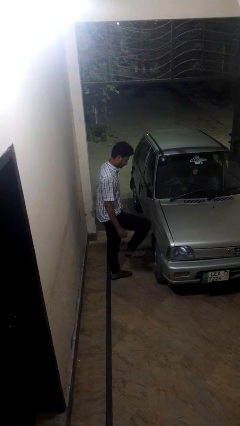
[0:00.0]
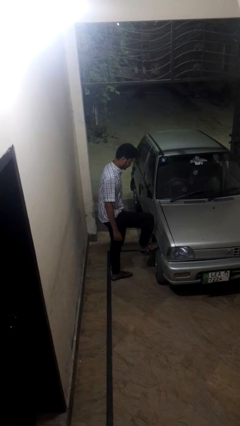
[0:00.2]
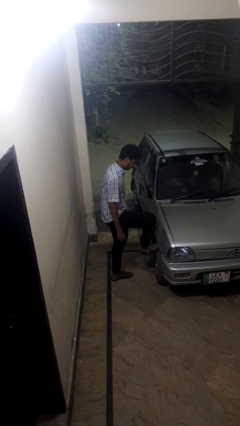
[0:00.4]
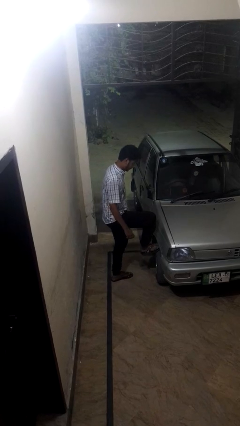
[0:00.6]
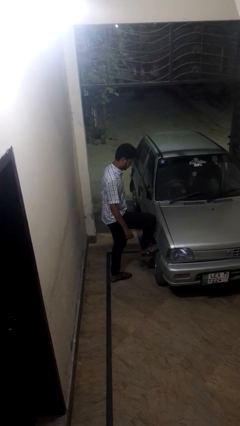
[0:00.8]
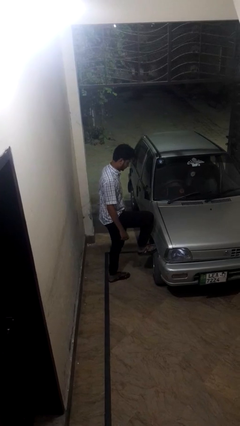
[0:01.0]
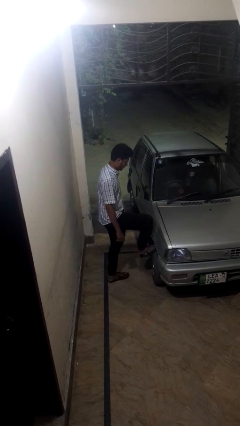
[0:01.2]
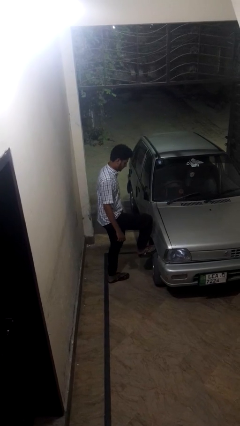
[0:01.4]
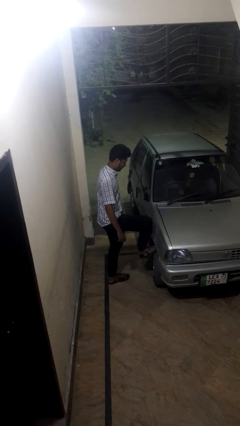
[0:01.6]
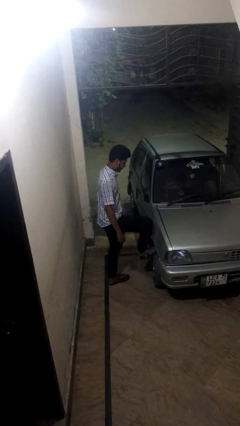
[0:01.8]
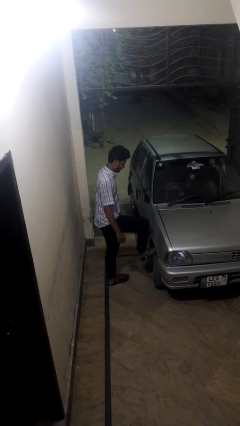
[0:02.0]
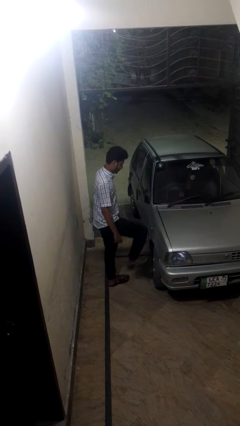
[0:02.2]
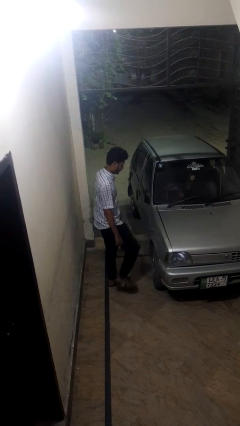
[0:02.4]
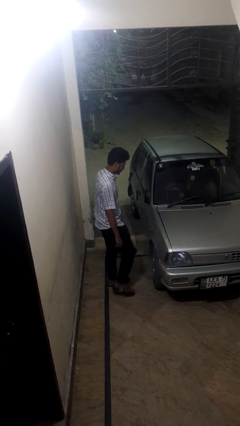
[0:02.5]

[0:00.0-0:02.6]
person kicks car tires

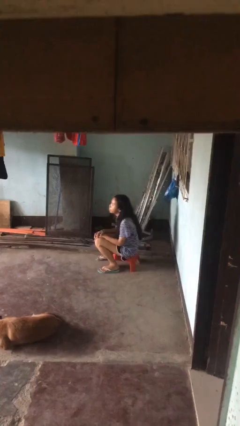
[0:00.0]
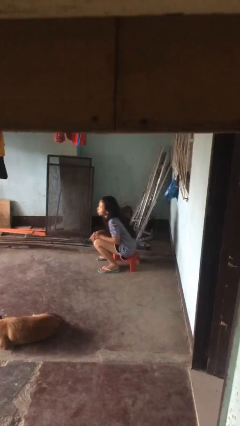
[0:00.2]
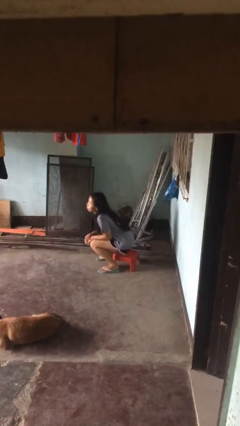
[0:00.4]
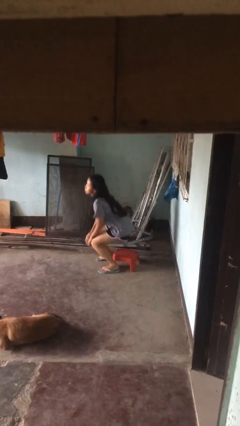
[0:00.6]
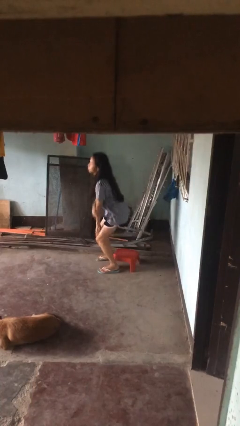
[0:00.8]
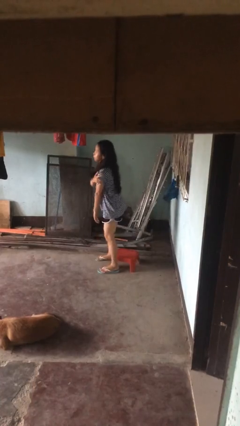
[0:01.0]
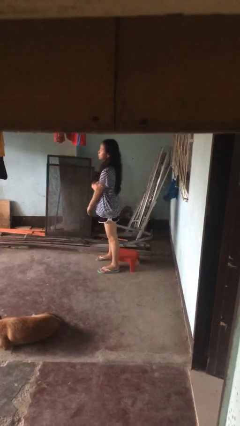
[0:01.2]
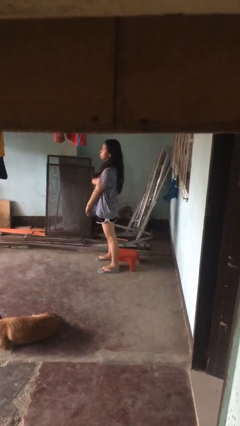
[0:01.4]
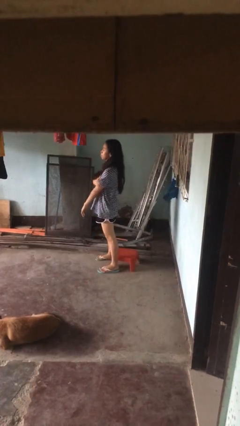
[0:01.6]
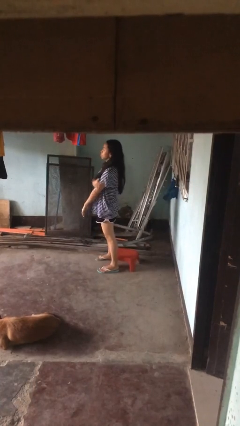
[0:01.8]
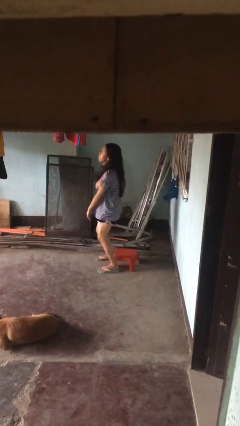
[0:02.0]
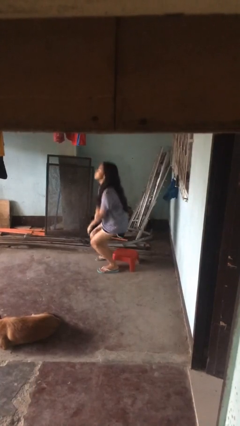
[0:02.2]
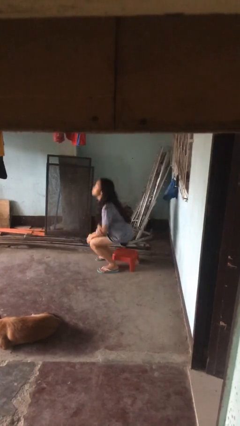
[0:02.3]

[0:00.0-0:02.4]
person stands up

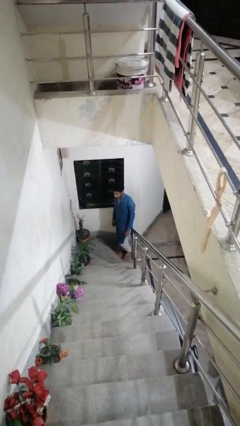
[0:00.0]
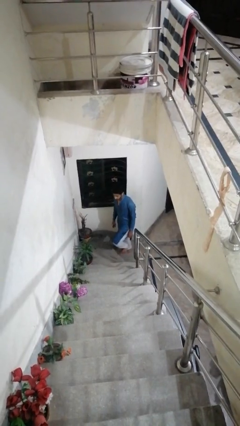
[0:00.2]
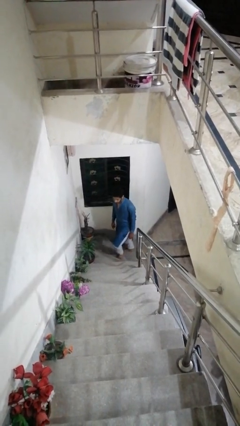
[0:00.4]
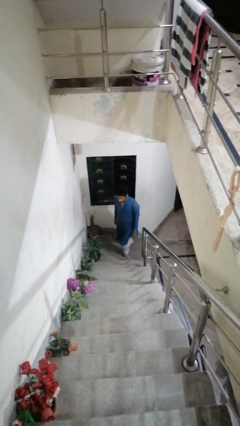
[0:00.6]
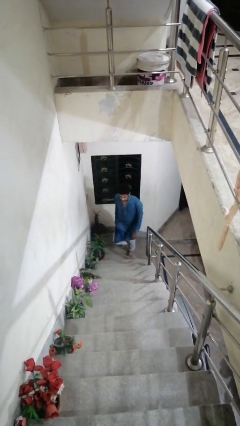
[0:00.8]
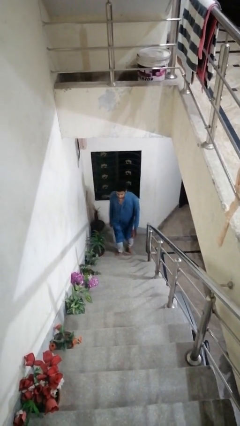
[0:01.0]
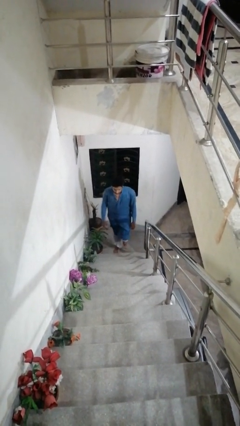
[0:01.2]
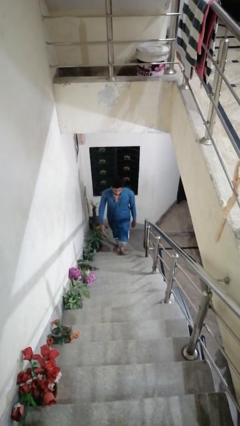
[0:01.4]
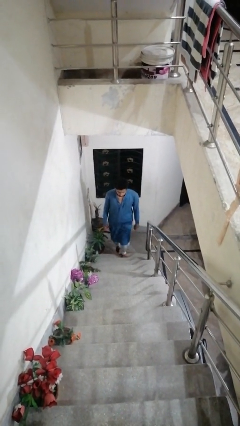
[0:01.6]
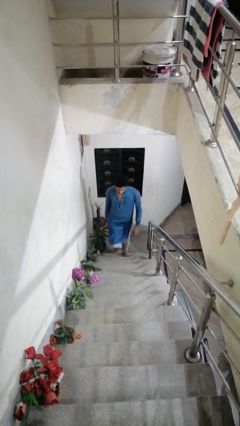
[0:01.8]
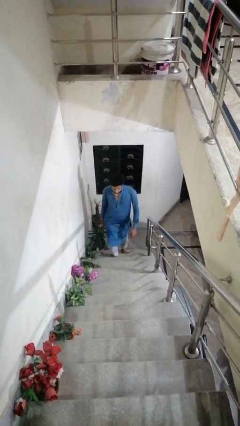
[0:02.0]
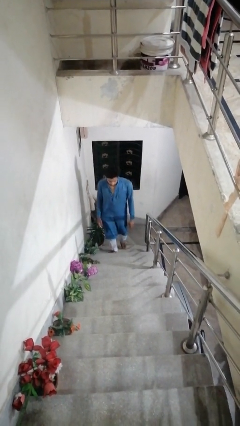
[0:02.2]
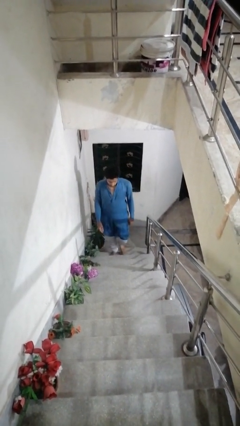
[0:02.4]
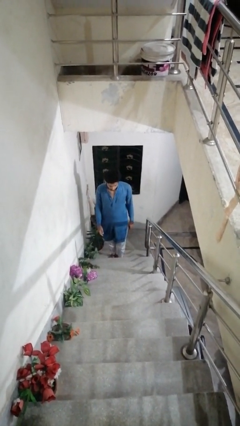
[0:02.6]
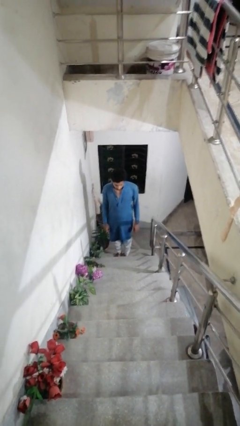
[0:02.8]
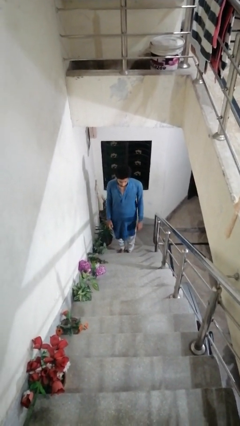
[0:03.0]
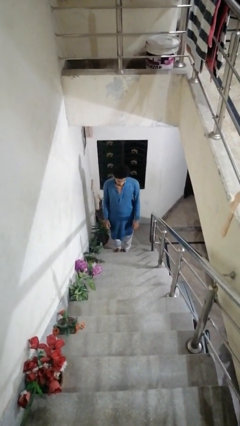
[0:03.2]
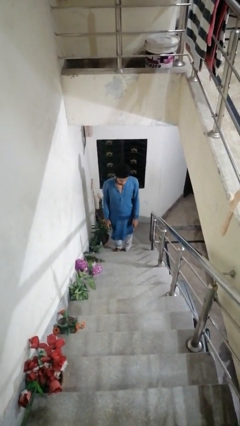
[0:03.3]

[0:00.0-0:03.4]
person climbs up stairs

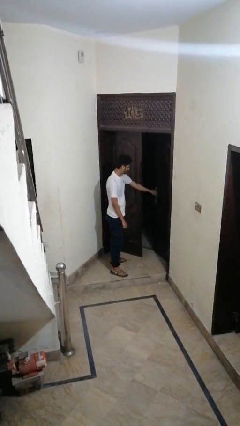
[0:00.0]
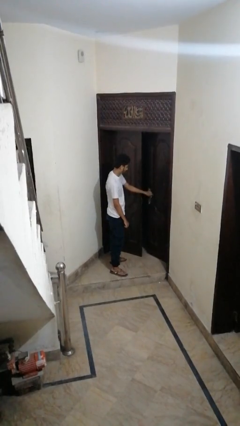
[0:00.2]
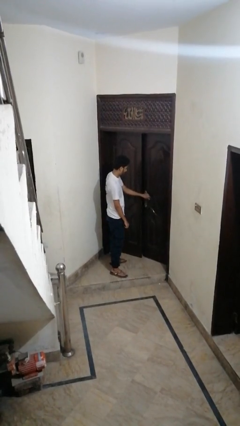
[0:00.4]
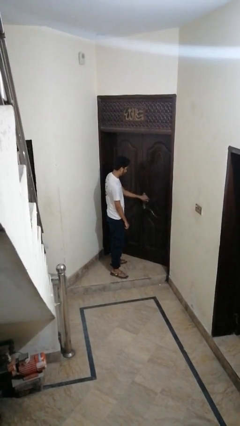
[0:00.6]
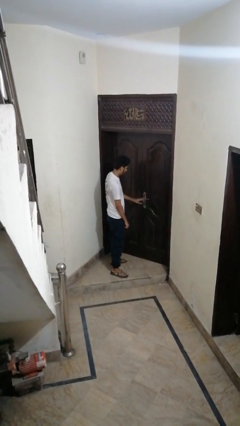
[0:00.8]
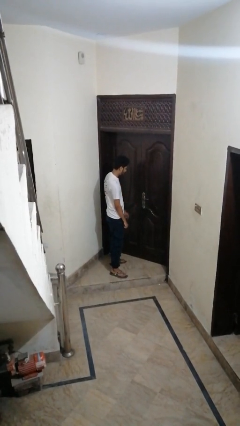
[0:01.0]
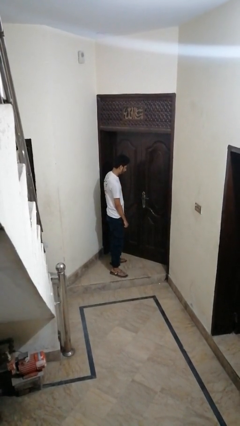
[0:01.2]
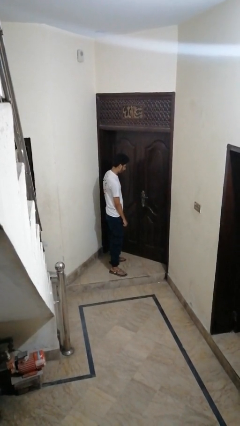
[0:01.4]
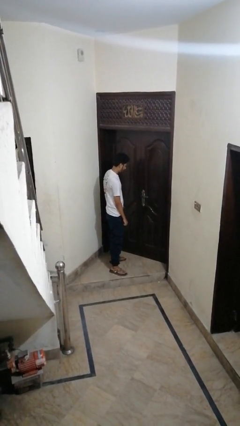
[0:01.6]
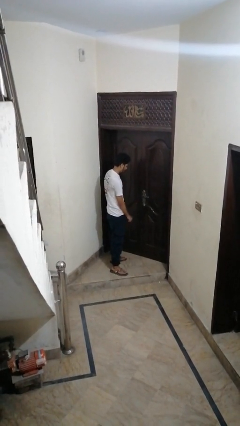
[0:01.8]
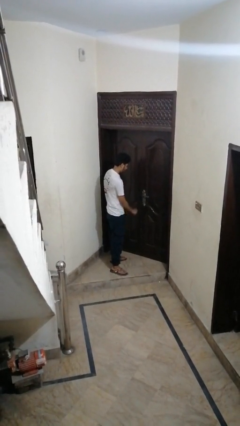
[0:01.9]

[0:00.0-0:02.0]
person closes facility door

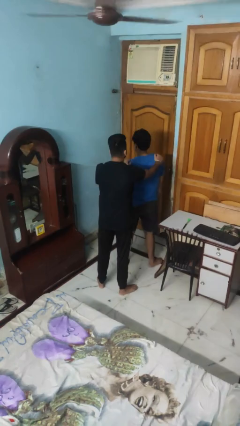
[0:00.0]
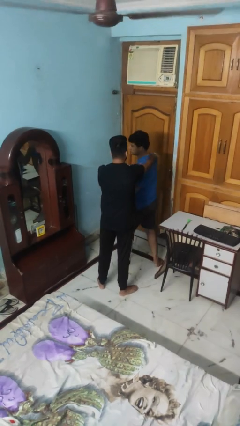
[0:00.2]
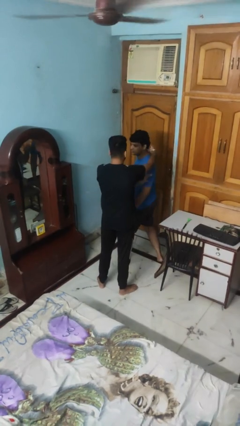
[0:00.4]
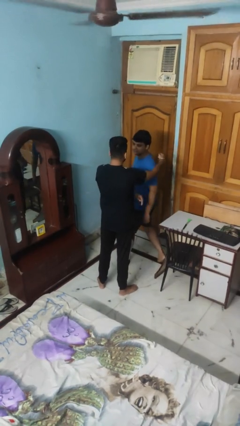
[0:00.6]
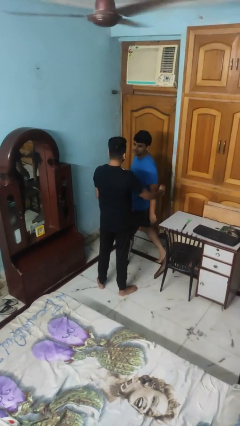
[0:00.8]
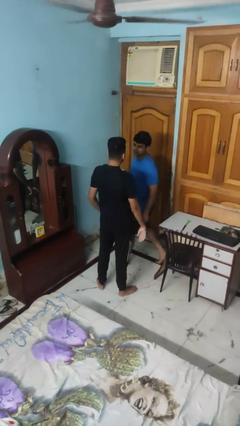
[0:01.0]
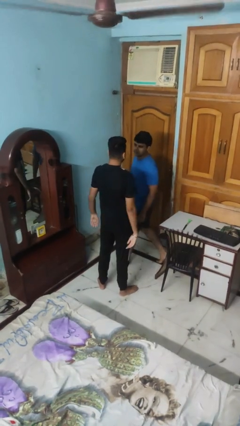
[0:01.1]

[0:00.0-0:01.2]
person spins person around

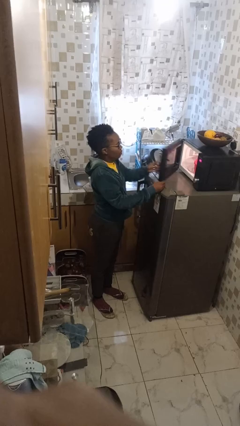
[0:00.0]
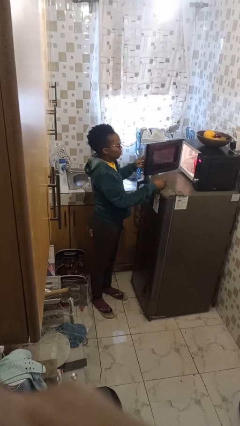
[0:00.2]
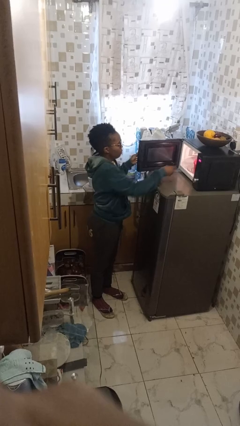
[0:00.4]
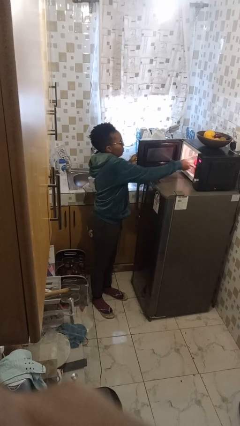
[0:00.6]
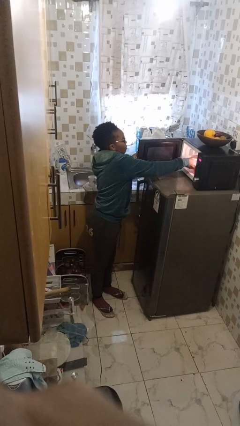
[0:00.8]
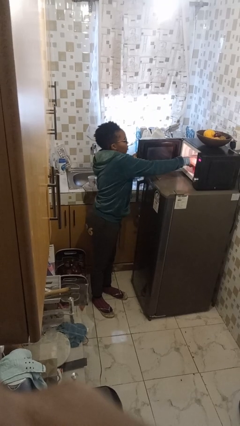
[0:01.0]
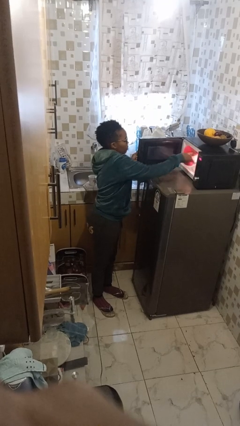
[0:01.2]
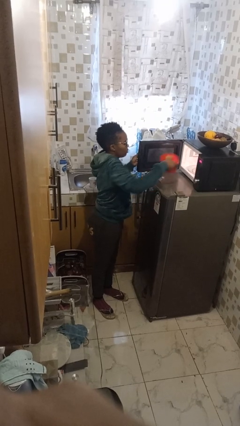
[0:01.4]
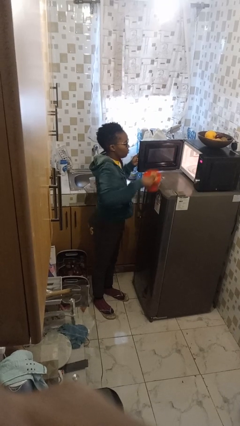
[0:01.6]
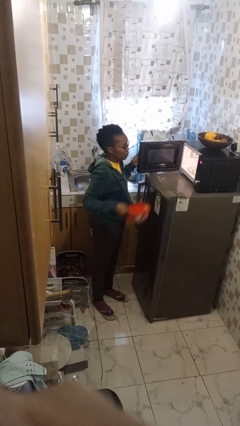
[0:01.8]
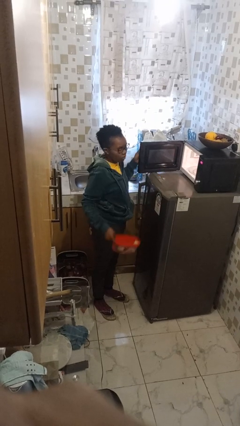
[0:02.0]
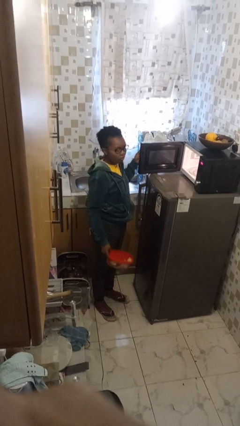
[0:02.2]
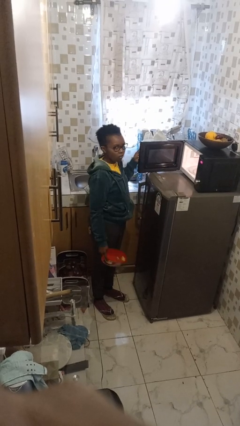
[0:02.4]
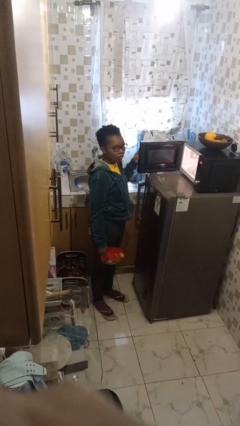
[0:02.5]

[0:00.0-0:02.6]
person takes object from microwave

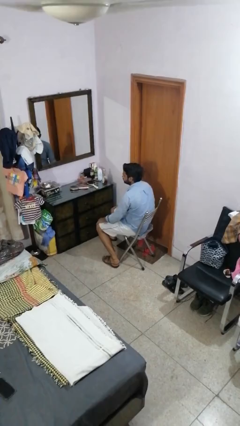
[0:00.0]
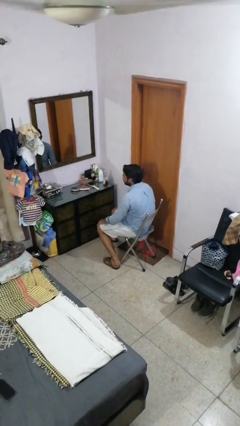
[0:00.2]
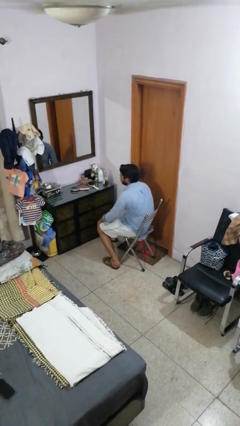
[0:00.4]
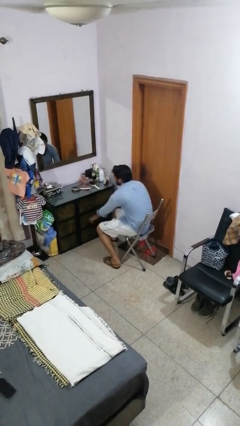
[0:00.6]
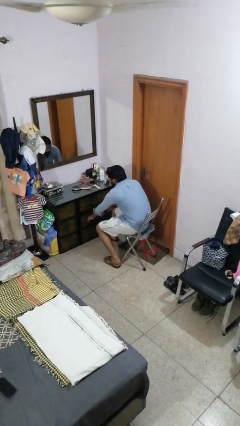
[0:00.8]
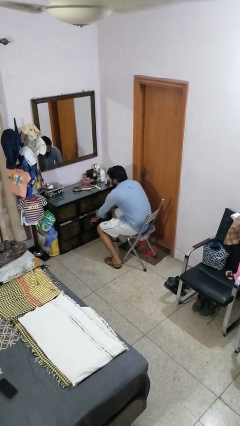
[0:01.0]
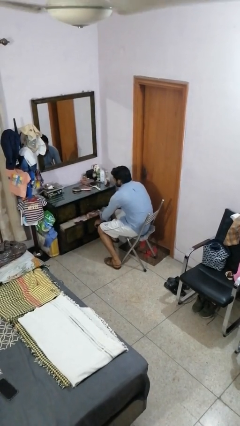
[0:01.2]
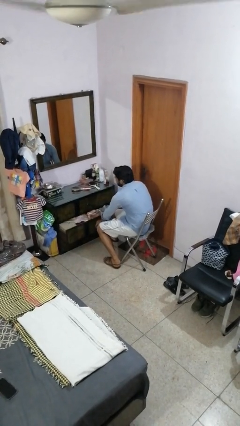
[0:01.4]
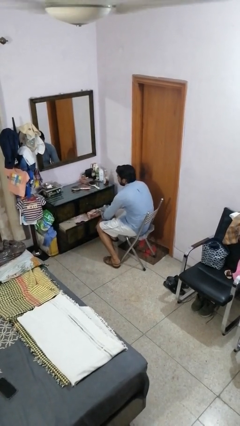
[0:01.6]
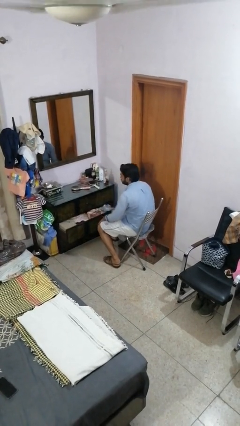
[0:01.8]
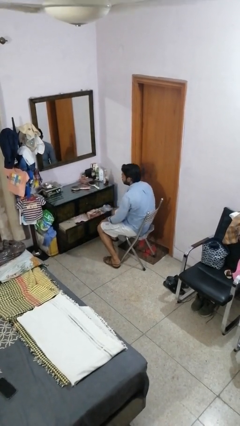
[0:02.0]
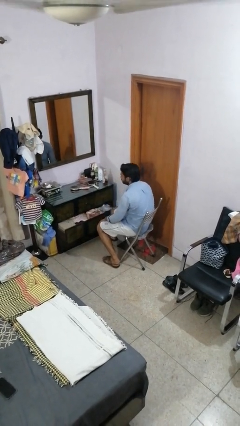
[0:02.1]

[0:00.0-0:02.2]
person opens dresser drawer

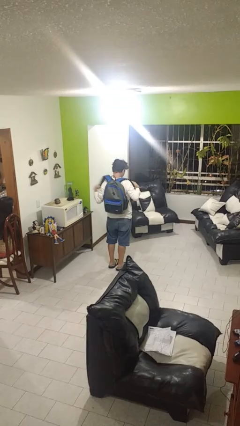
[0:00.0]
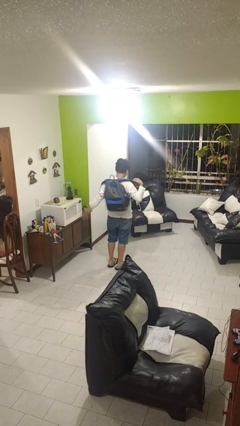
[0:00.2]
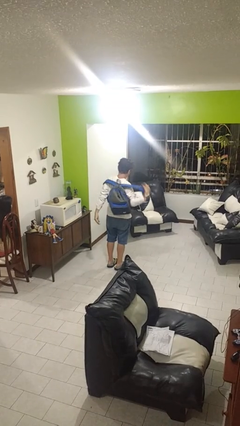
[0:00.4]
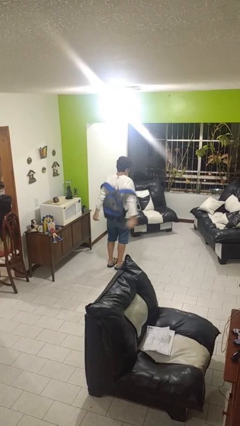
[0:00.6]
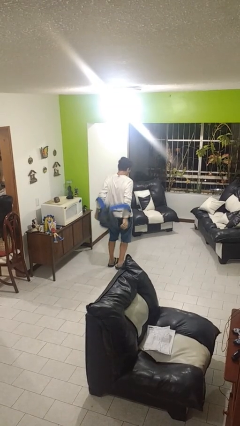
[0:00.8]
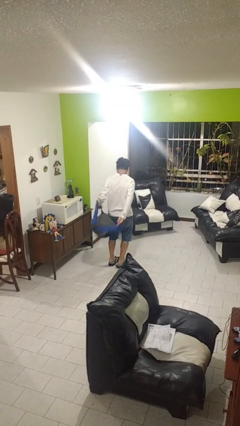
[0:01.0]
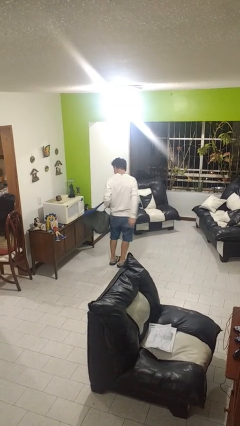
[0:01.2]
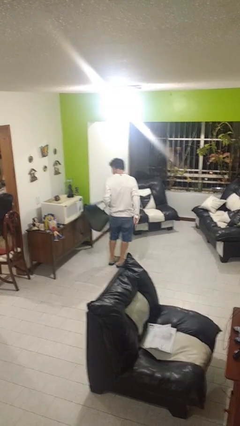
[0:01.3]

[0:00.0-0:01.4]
person takes off backpack
